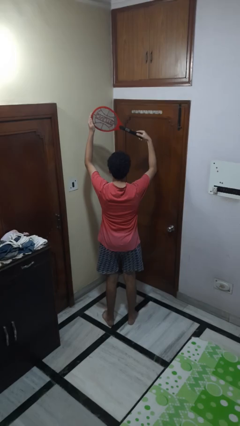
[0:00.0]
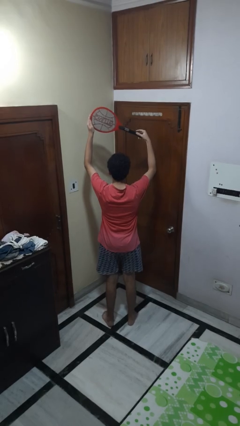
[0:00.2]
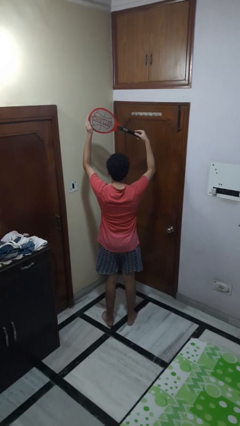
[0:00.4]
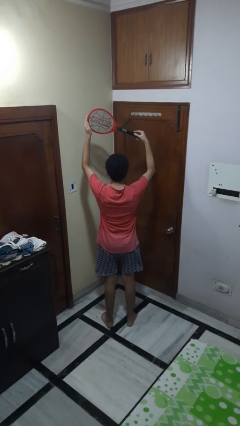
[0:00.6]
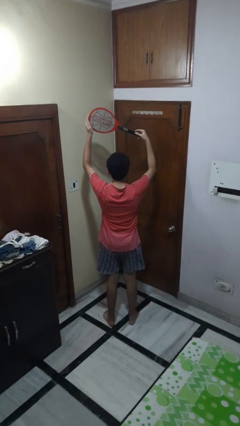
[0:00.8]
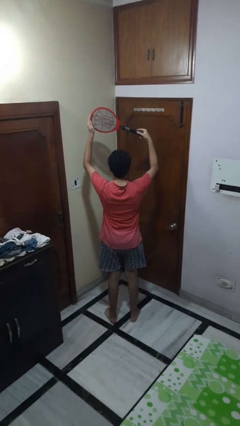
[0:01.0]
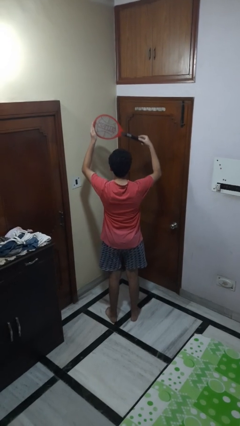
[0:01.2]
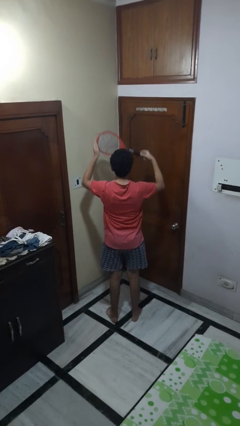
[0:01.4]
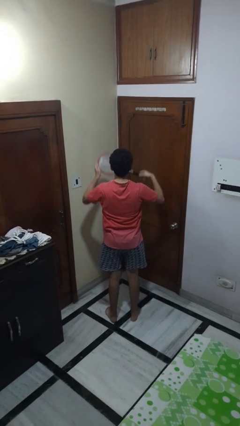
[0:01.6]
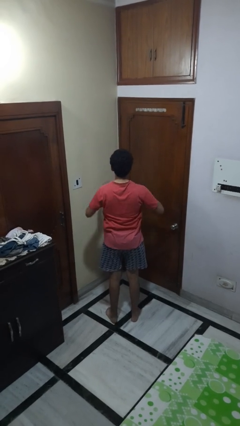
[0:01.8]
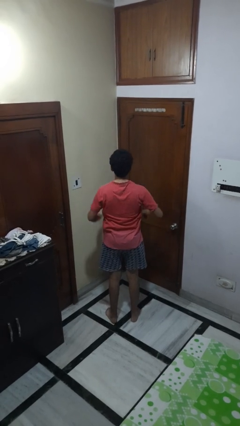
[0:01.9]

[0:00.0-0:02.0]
person holds object above head

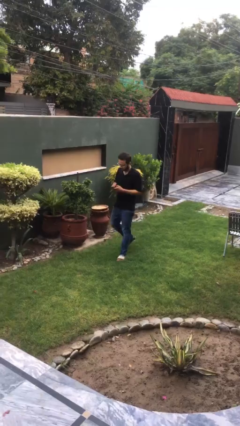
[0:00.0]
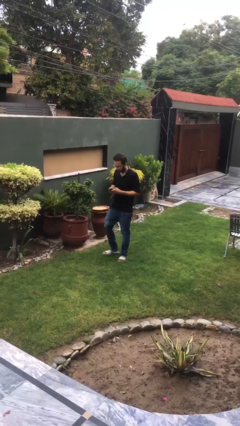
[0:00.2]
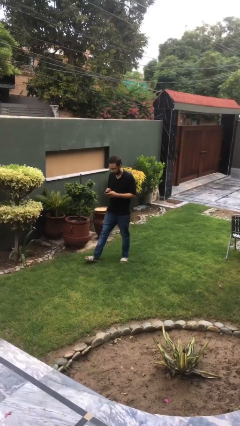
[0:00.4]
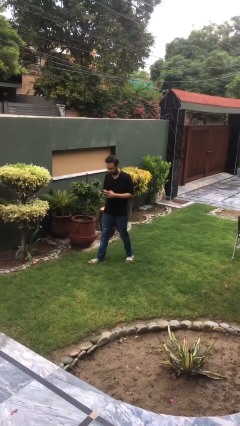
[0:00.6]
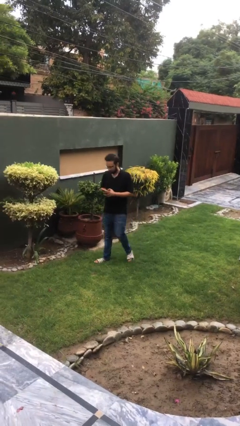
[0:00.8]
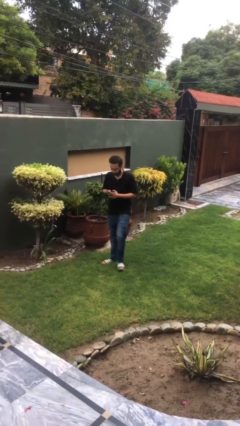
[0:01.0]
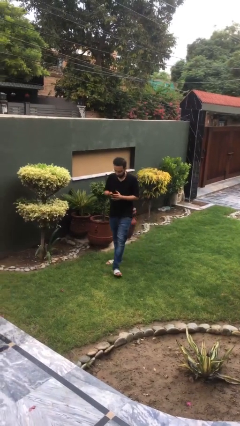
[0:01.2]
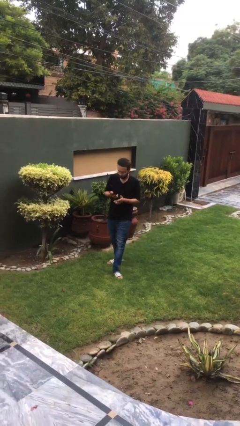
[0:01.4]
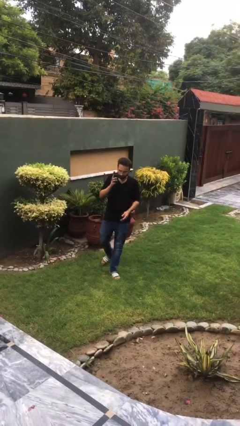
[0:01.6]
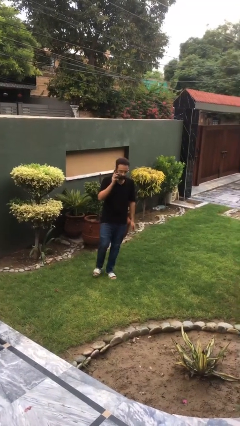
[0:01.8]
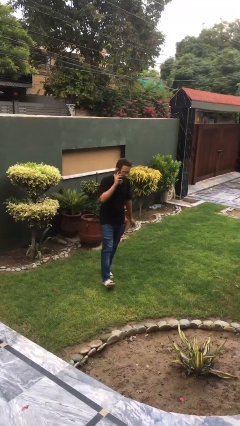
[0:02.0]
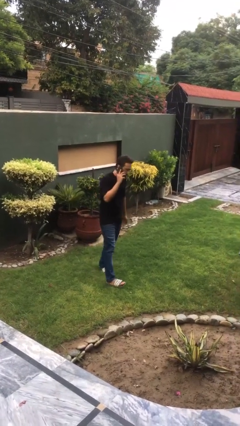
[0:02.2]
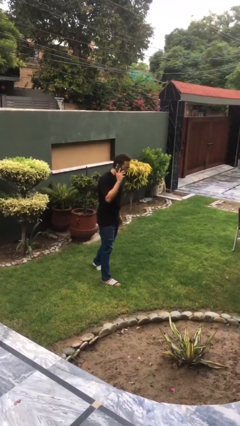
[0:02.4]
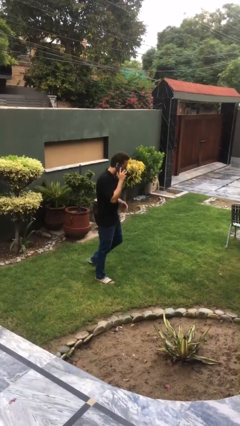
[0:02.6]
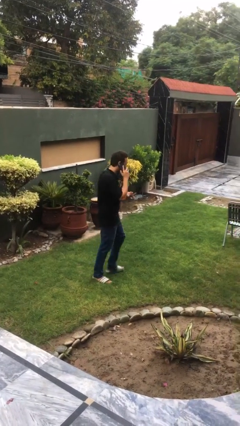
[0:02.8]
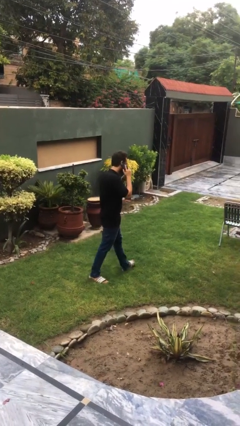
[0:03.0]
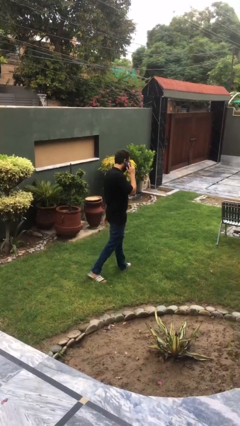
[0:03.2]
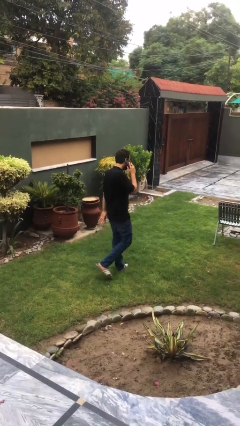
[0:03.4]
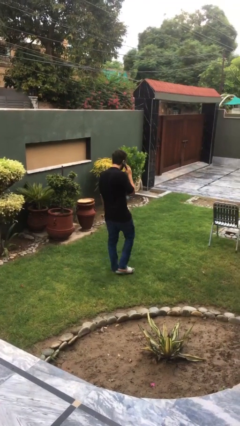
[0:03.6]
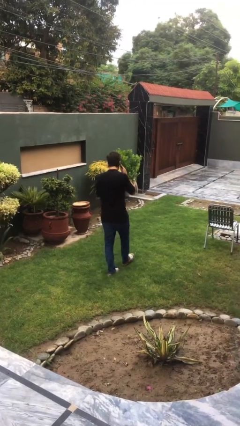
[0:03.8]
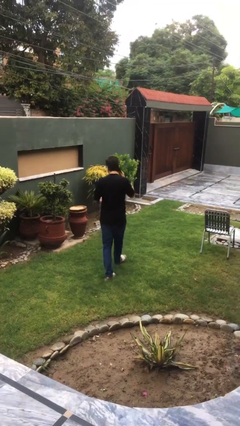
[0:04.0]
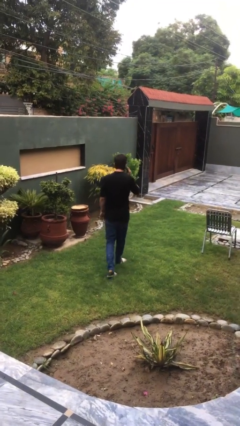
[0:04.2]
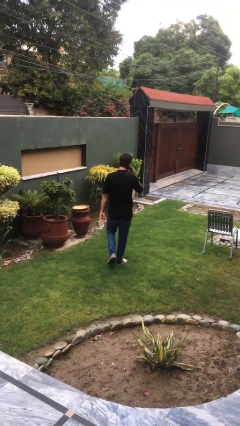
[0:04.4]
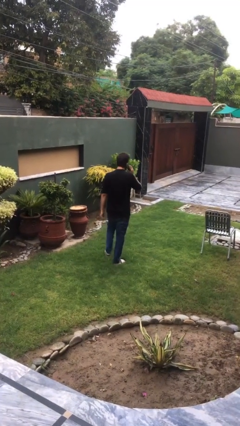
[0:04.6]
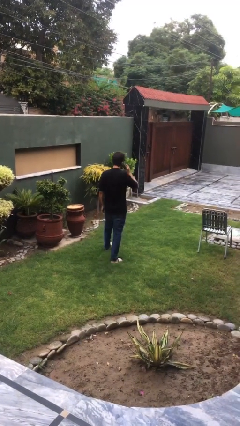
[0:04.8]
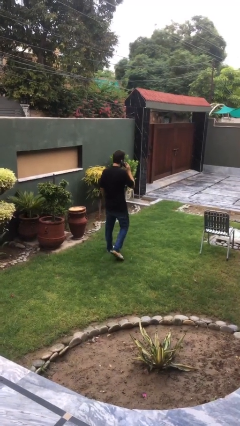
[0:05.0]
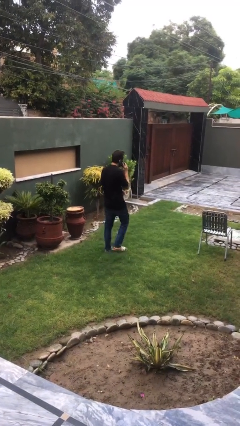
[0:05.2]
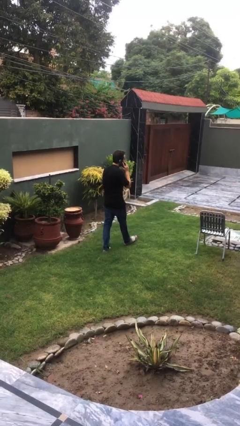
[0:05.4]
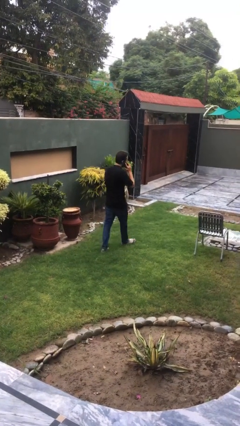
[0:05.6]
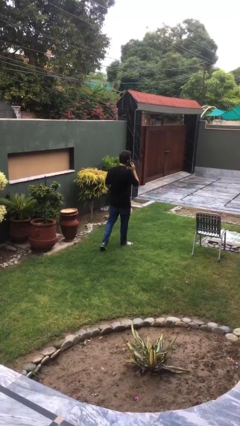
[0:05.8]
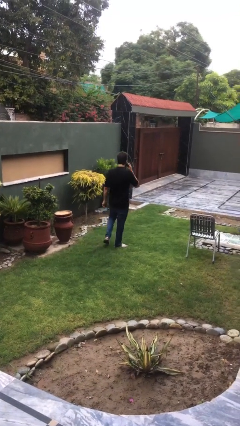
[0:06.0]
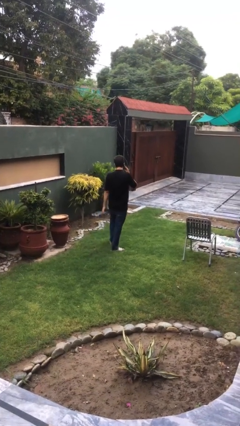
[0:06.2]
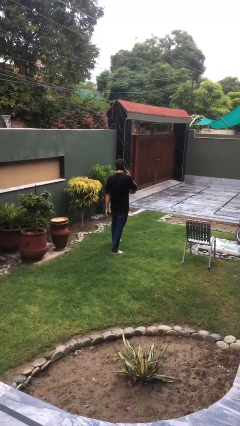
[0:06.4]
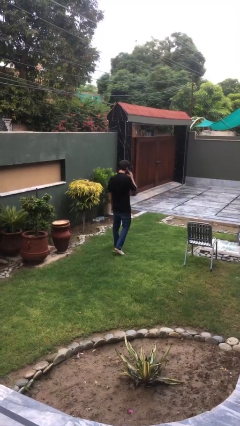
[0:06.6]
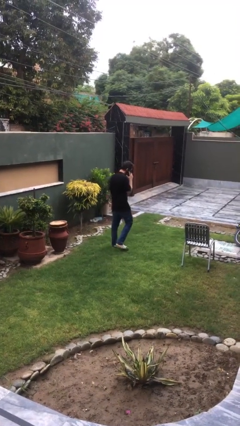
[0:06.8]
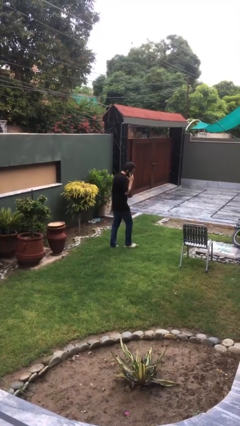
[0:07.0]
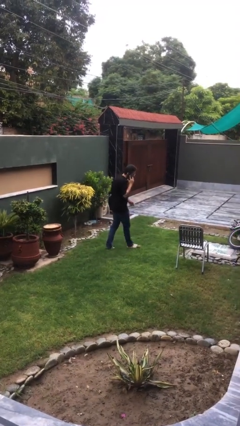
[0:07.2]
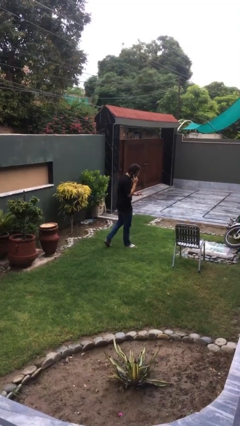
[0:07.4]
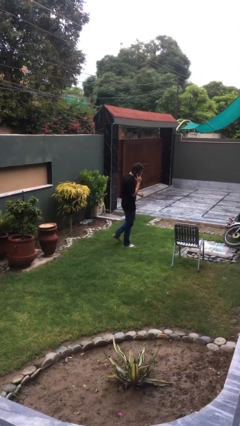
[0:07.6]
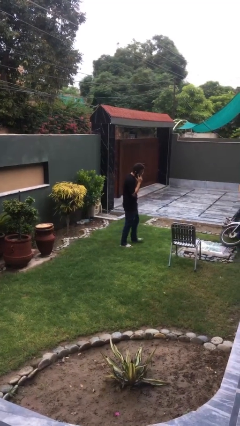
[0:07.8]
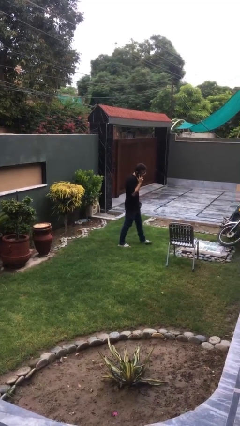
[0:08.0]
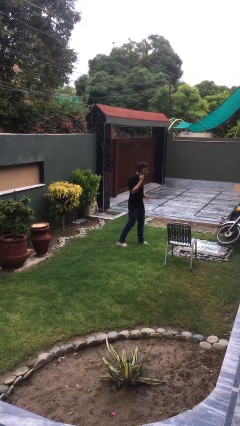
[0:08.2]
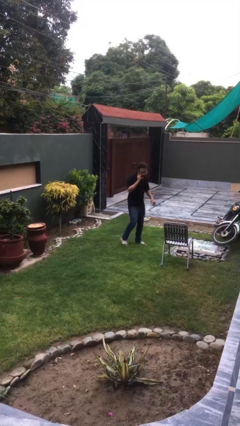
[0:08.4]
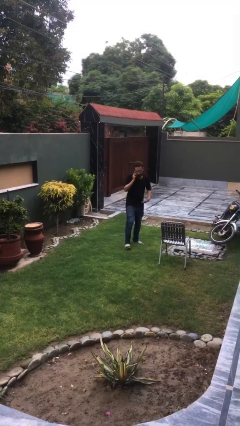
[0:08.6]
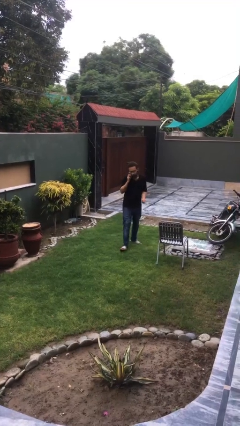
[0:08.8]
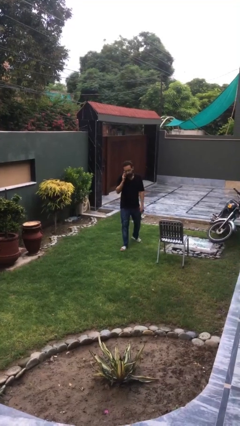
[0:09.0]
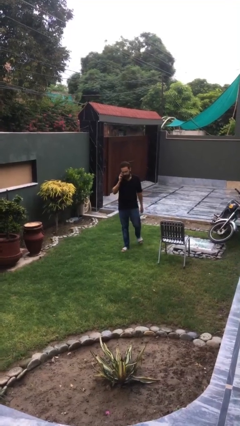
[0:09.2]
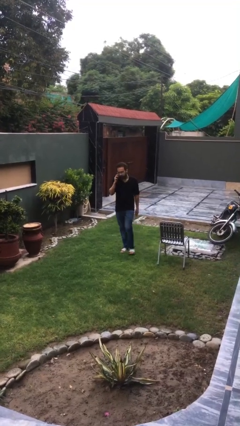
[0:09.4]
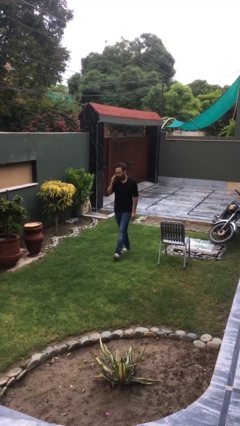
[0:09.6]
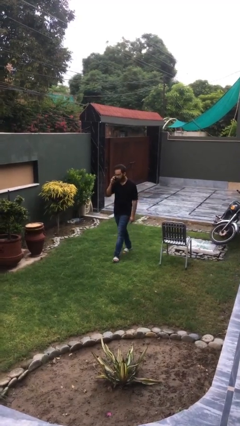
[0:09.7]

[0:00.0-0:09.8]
person talks on phone

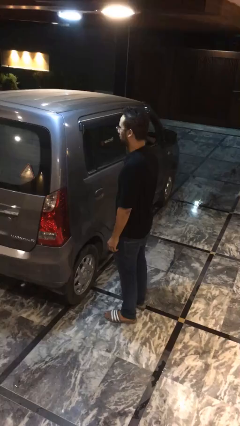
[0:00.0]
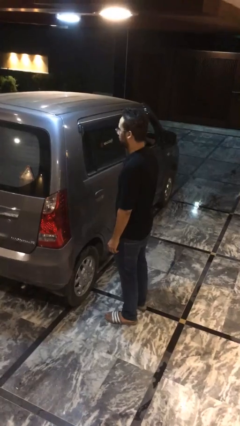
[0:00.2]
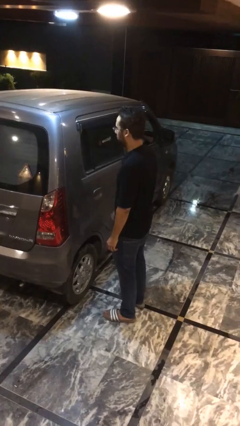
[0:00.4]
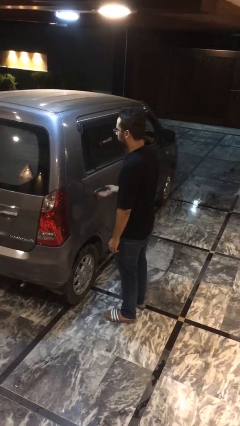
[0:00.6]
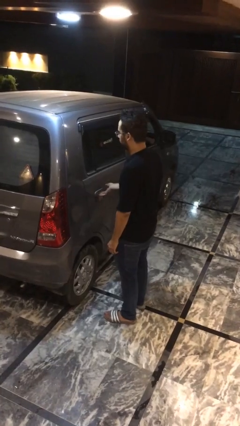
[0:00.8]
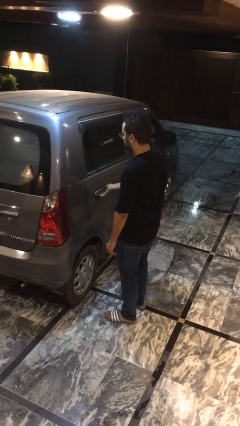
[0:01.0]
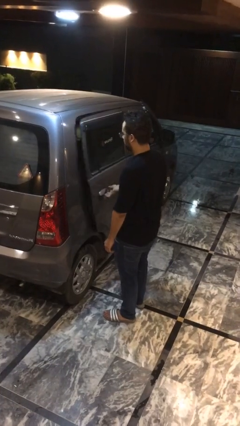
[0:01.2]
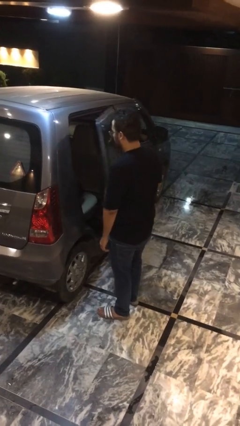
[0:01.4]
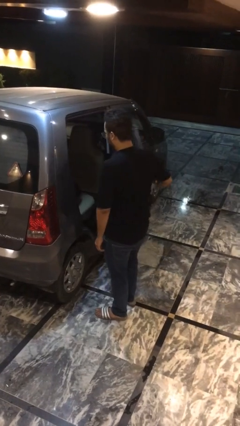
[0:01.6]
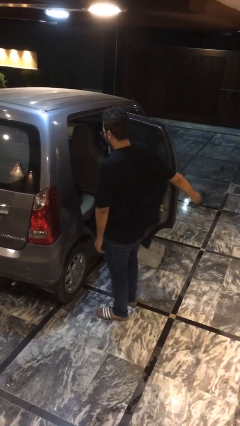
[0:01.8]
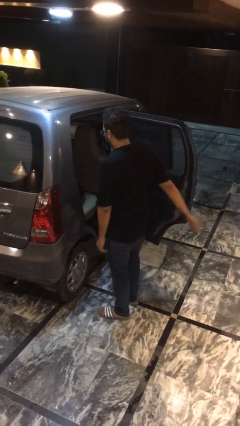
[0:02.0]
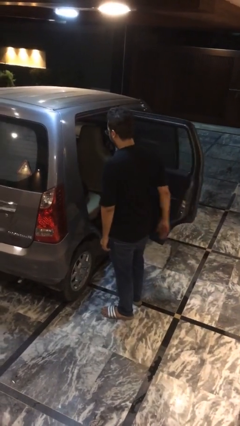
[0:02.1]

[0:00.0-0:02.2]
person opens car door

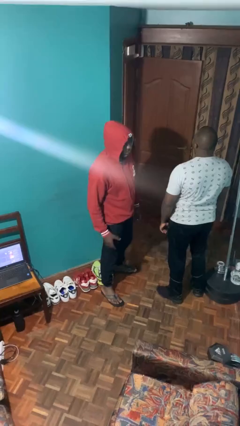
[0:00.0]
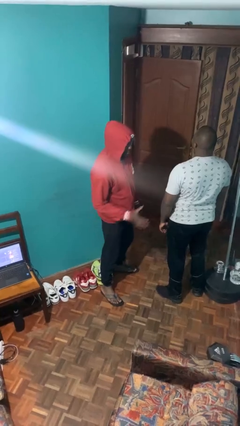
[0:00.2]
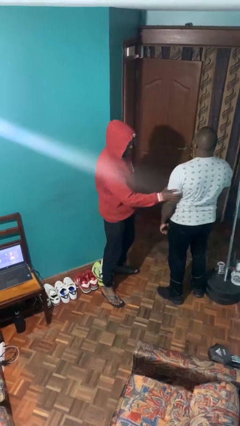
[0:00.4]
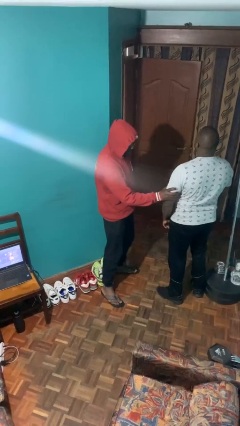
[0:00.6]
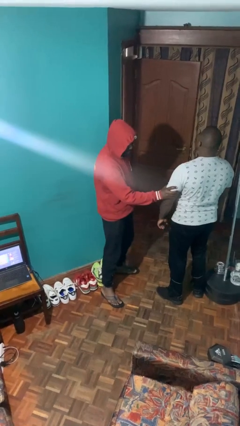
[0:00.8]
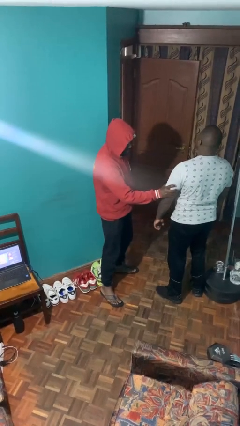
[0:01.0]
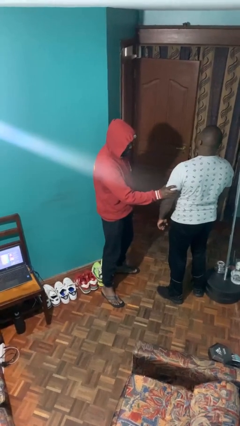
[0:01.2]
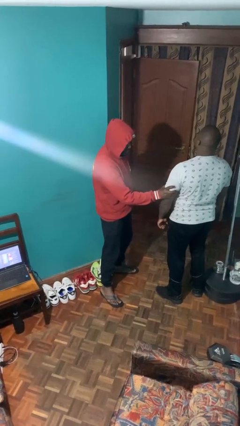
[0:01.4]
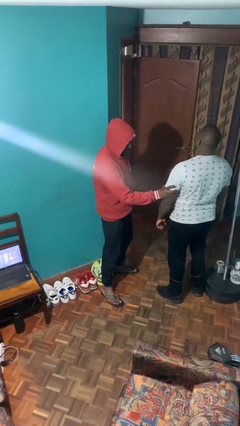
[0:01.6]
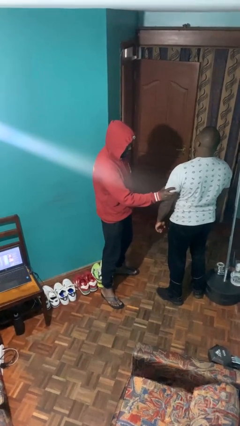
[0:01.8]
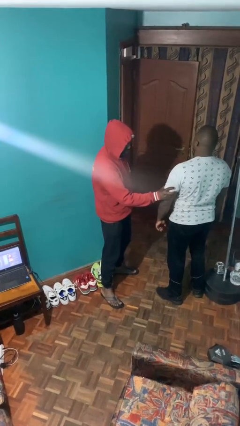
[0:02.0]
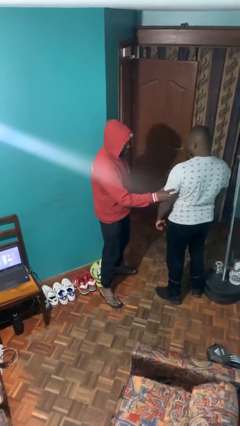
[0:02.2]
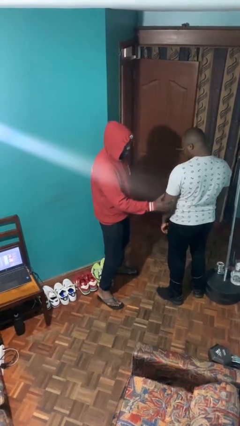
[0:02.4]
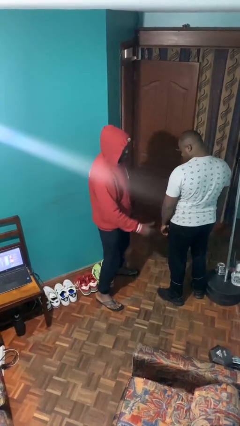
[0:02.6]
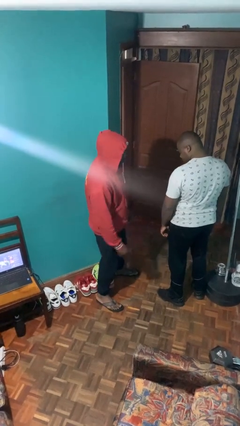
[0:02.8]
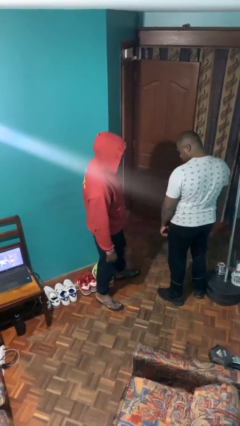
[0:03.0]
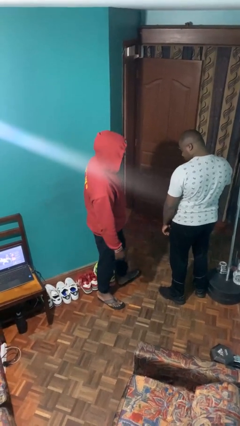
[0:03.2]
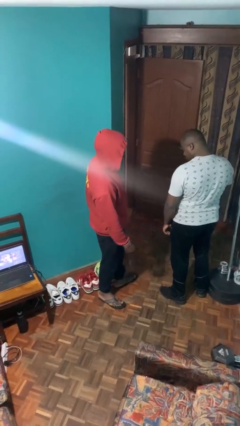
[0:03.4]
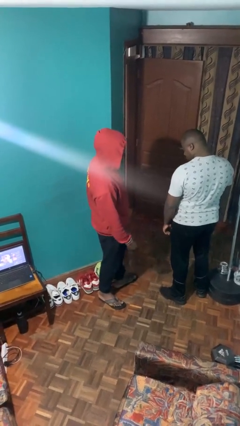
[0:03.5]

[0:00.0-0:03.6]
person grabs person by bicep
